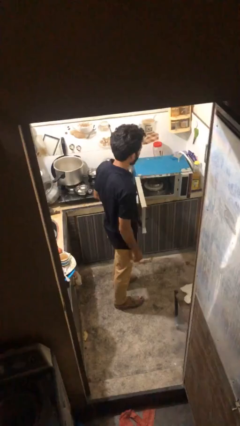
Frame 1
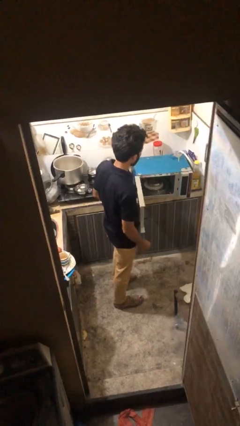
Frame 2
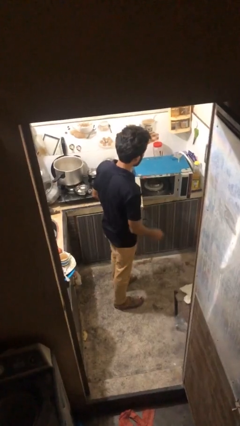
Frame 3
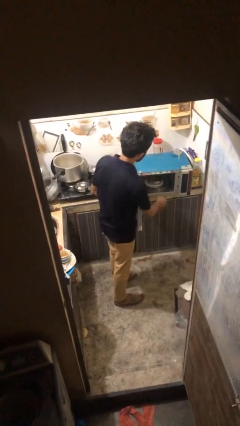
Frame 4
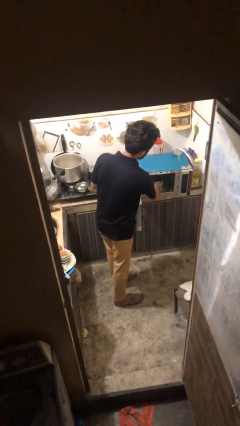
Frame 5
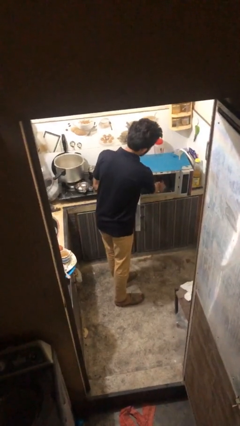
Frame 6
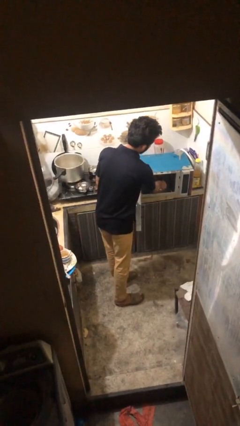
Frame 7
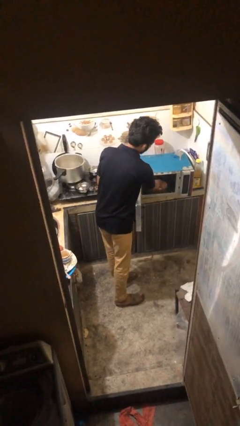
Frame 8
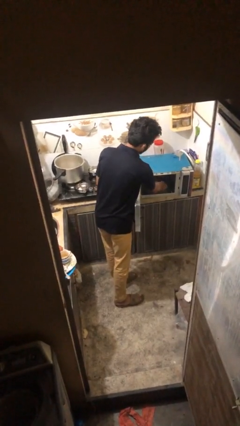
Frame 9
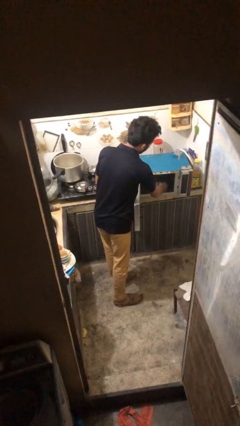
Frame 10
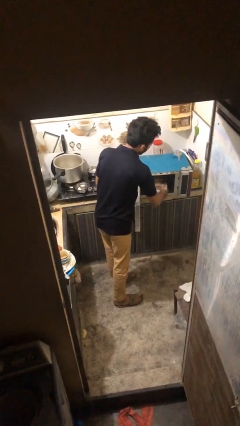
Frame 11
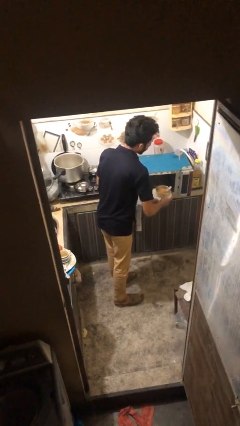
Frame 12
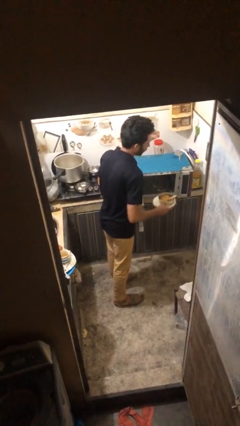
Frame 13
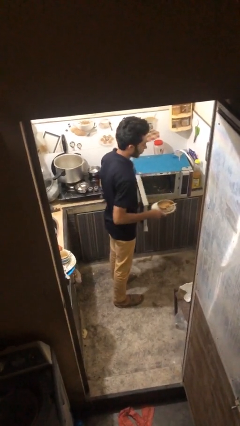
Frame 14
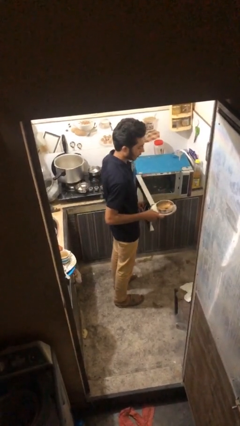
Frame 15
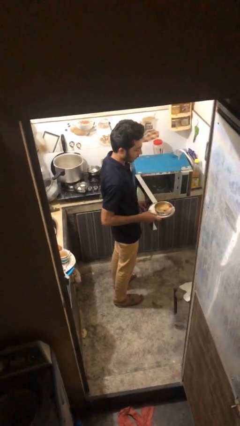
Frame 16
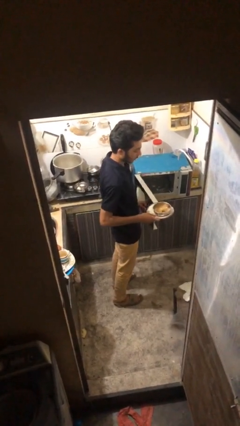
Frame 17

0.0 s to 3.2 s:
person takes object from microwave

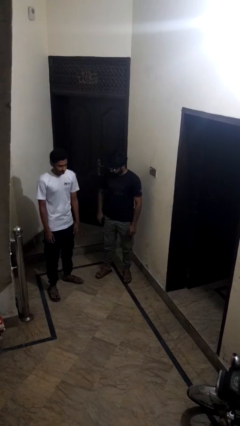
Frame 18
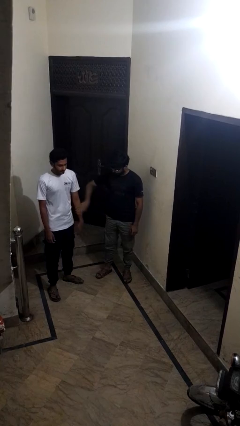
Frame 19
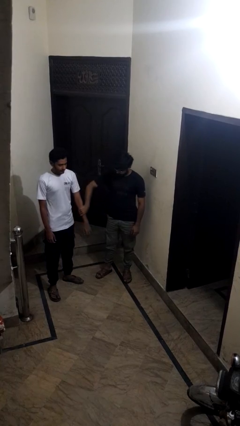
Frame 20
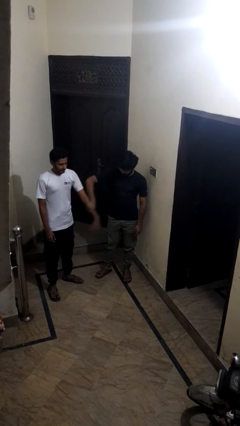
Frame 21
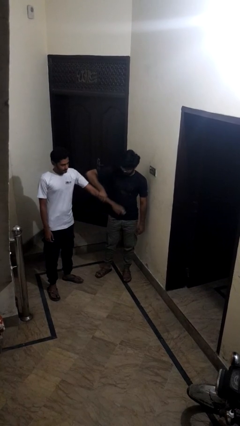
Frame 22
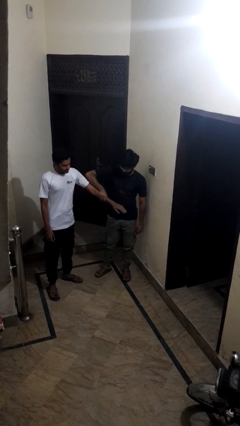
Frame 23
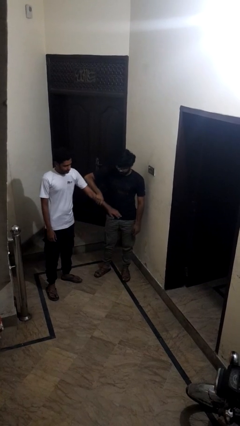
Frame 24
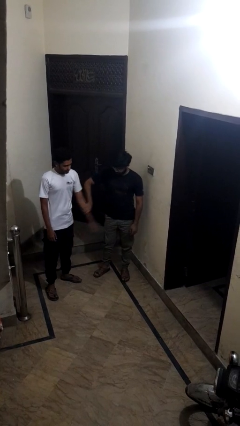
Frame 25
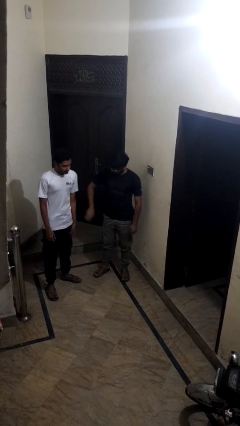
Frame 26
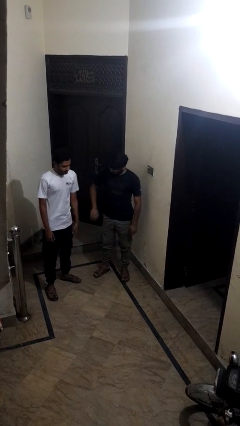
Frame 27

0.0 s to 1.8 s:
person grabs person by forearm

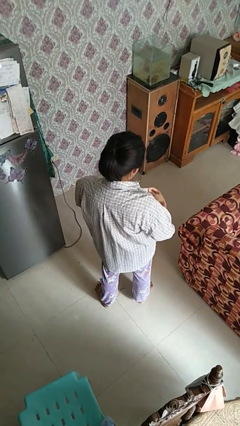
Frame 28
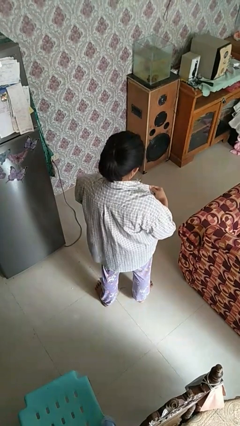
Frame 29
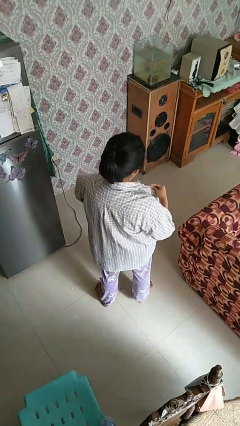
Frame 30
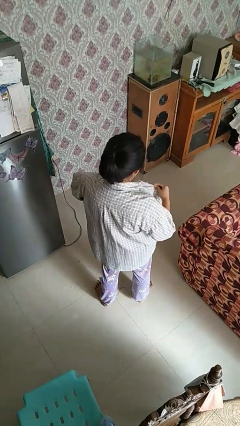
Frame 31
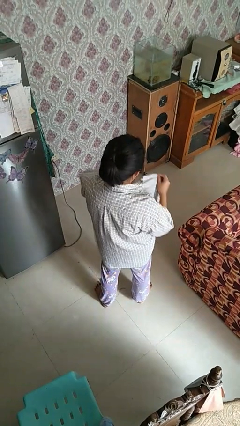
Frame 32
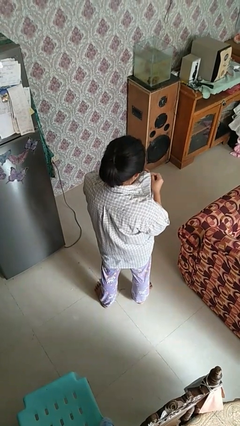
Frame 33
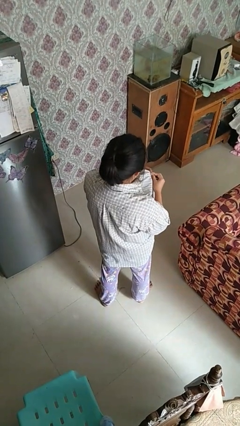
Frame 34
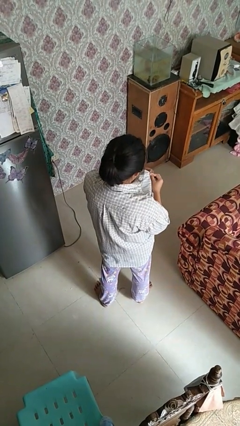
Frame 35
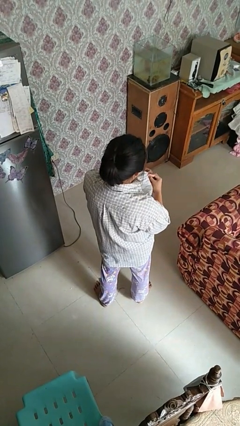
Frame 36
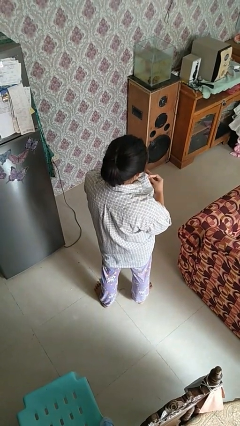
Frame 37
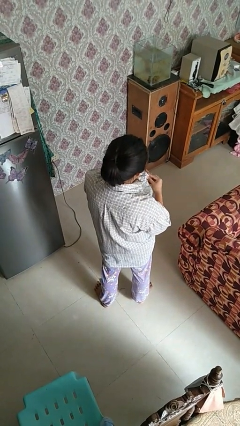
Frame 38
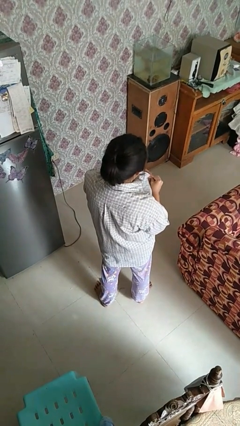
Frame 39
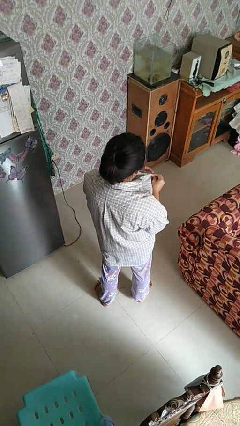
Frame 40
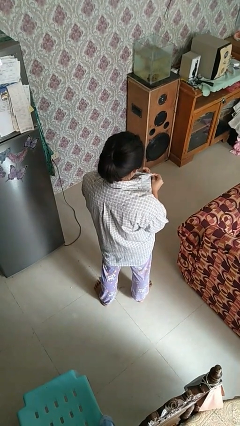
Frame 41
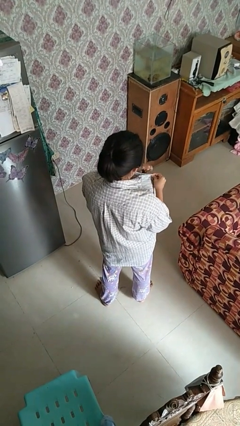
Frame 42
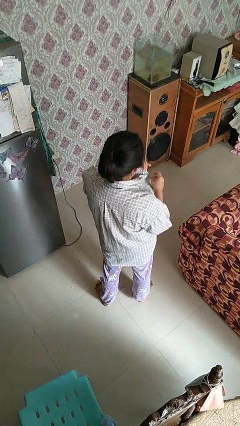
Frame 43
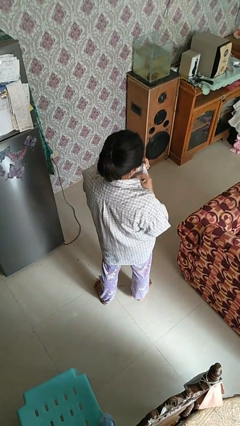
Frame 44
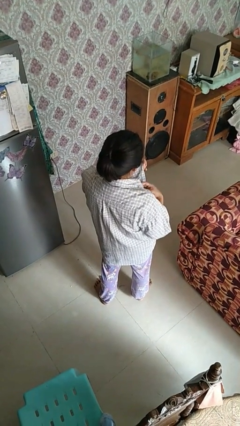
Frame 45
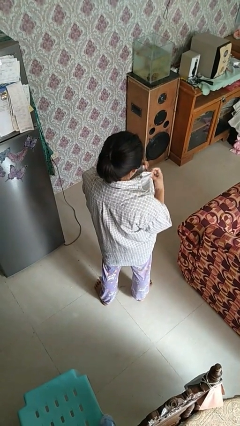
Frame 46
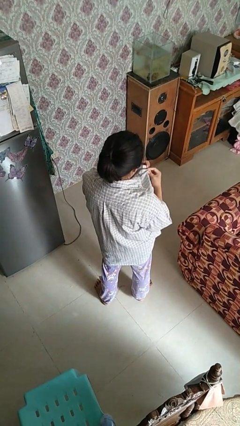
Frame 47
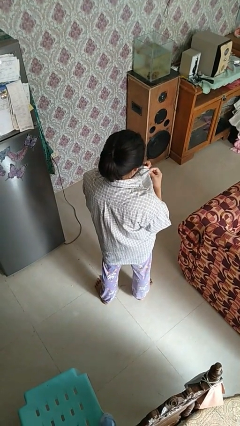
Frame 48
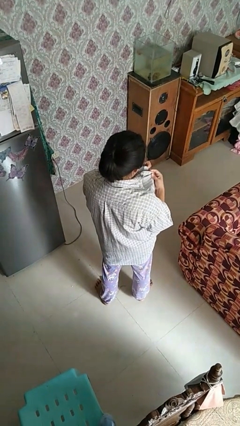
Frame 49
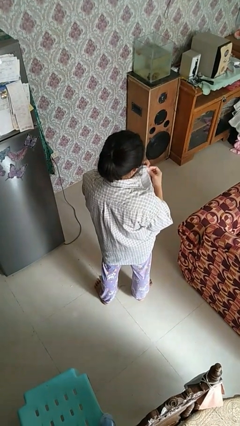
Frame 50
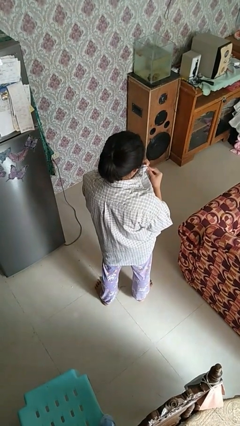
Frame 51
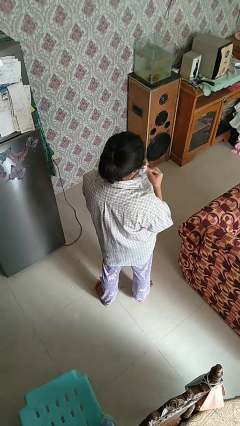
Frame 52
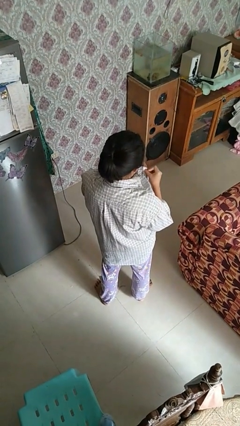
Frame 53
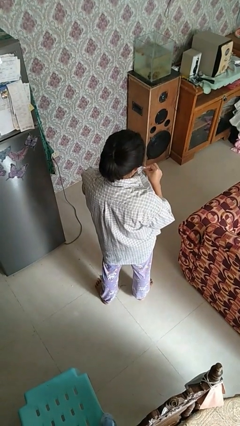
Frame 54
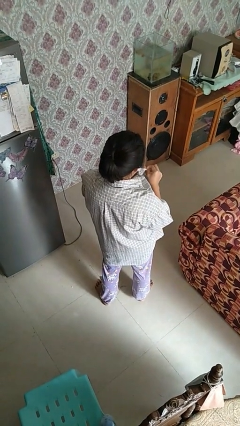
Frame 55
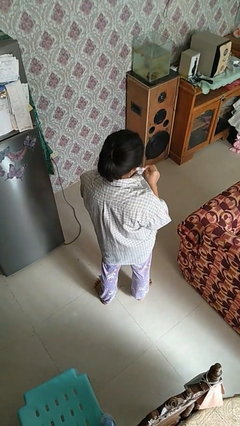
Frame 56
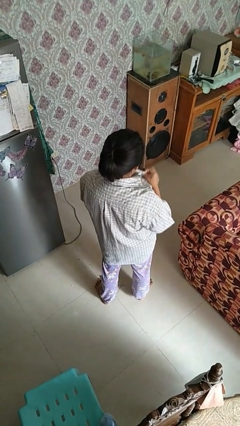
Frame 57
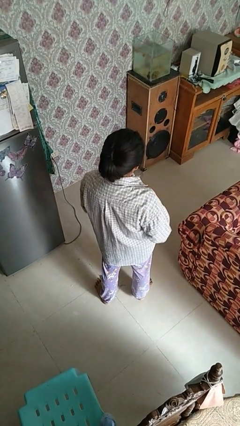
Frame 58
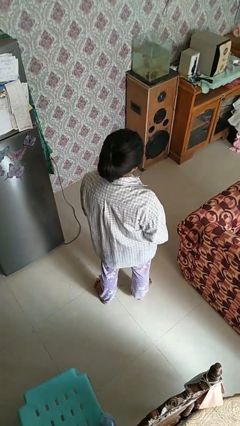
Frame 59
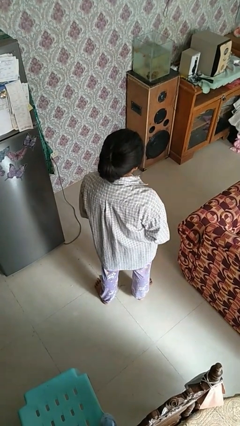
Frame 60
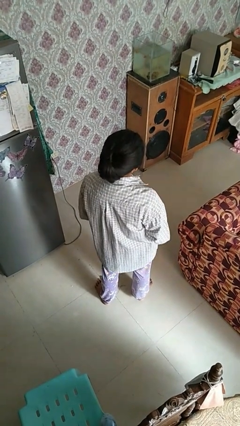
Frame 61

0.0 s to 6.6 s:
person buttons shirt

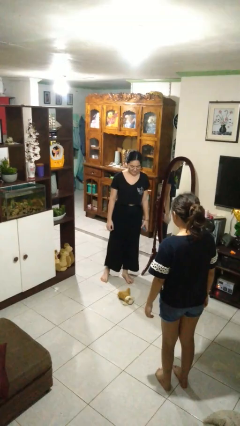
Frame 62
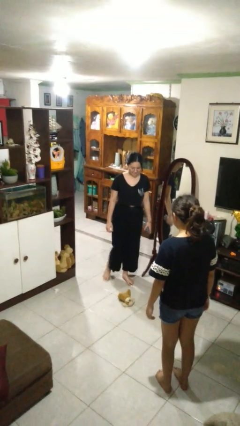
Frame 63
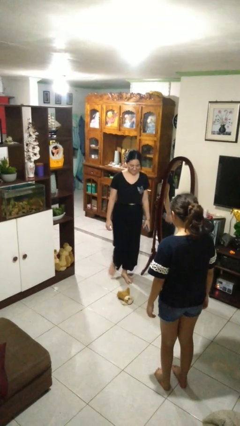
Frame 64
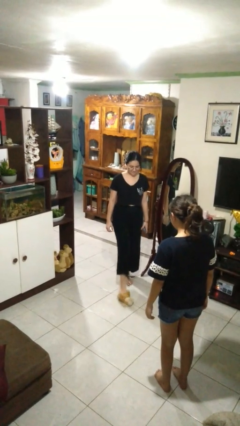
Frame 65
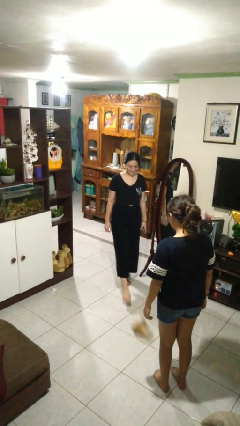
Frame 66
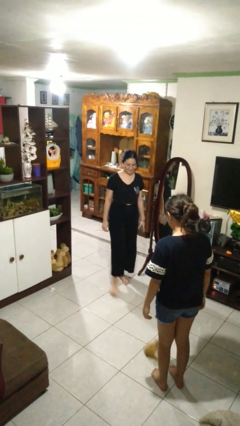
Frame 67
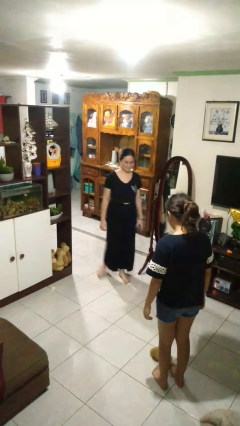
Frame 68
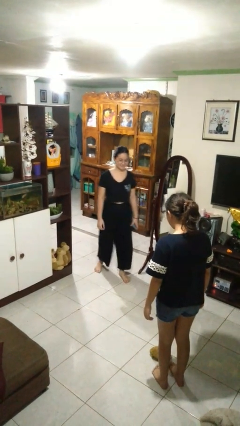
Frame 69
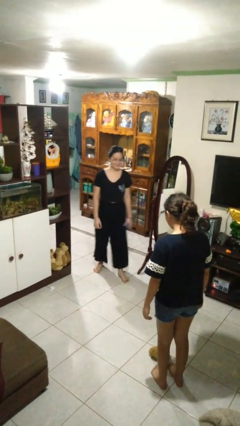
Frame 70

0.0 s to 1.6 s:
person kicks object to person

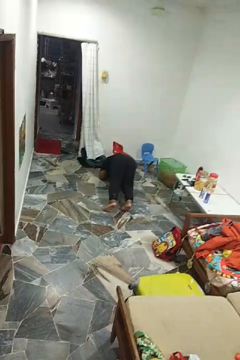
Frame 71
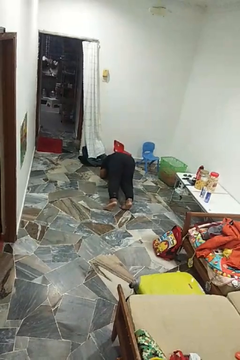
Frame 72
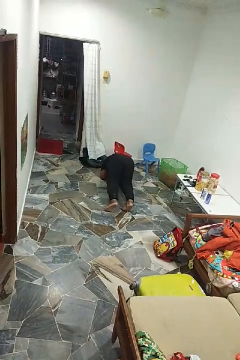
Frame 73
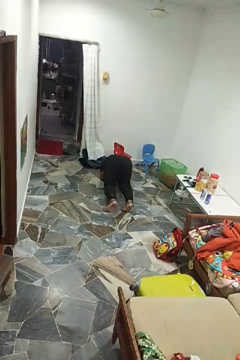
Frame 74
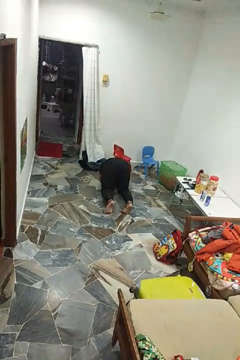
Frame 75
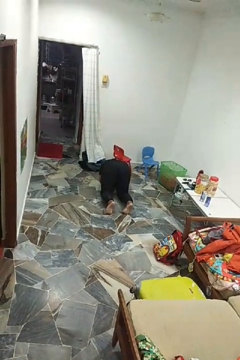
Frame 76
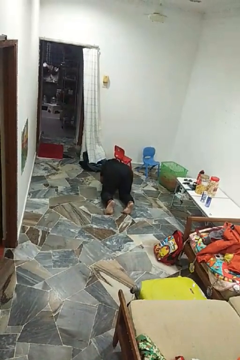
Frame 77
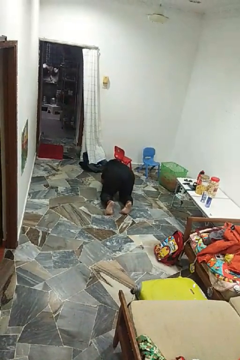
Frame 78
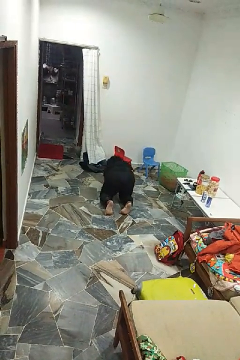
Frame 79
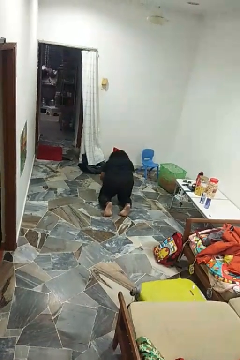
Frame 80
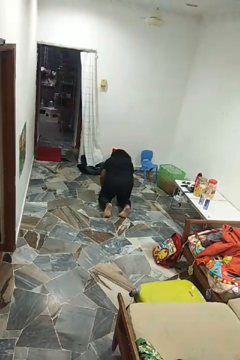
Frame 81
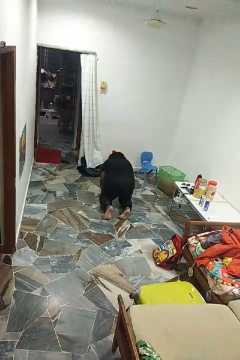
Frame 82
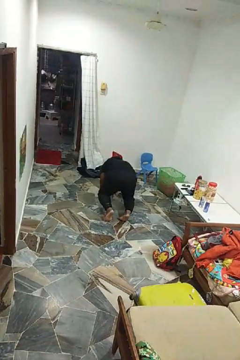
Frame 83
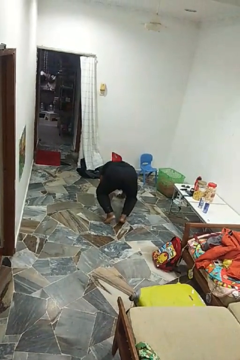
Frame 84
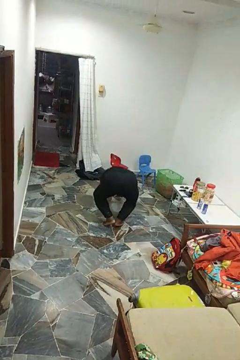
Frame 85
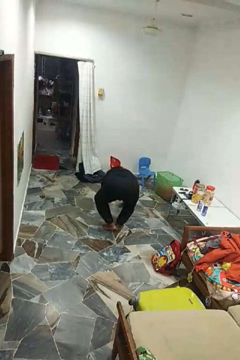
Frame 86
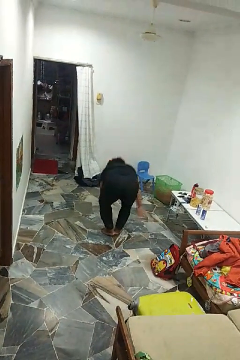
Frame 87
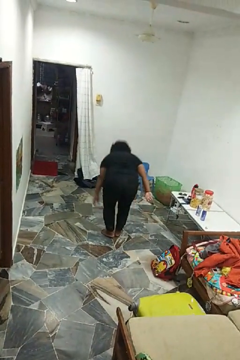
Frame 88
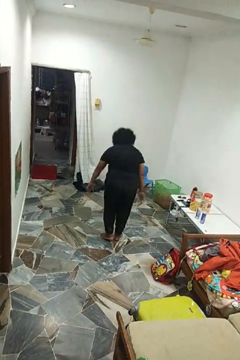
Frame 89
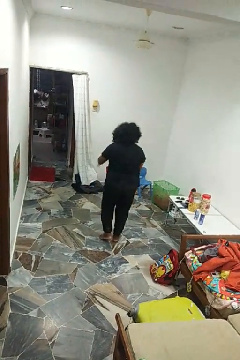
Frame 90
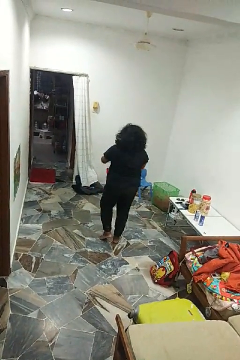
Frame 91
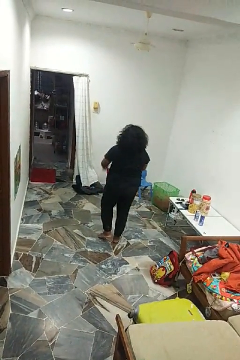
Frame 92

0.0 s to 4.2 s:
person stands up from floor

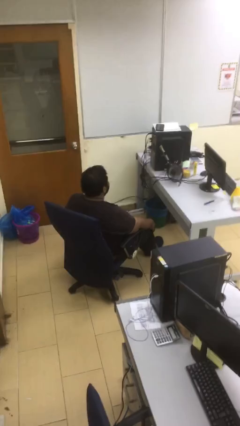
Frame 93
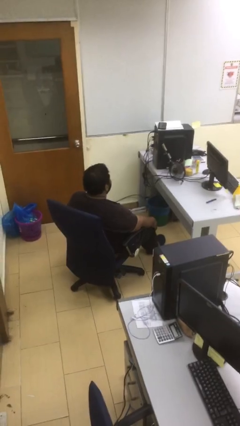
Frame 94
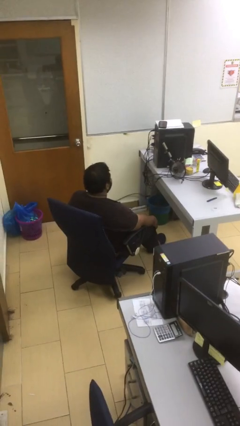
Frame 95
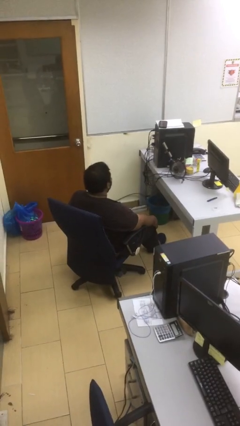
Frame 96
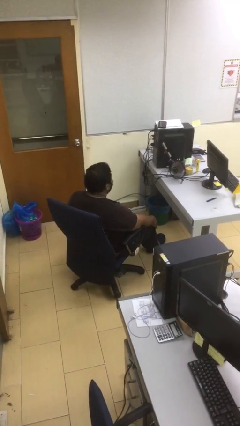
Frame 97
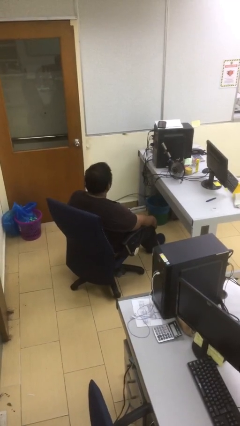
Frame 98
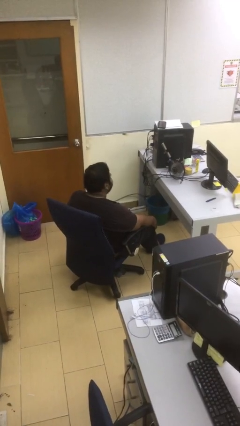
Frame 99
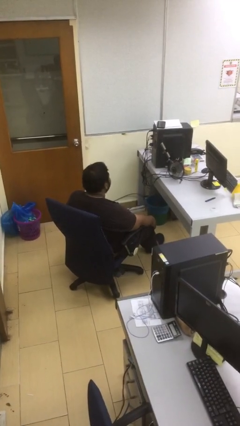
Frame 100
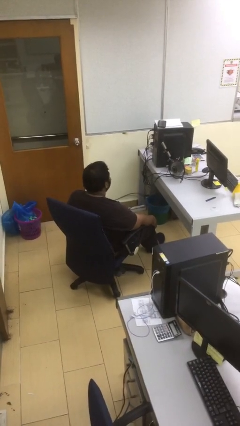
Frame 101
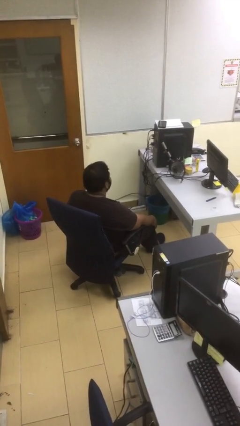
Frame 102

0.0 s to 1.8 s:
person shakes head
